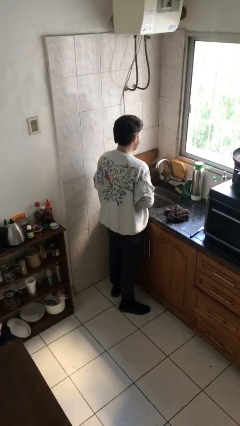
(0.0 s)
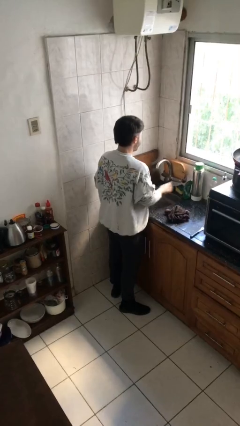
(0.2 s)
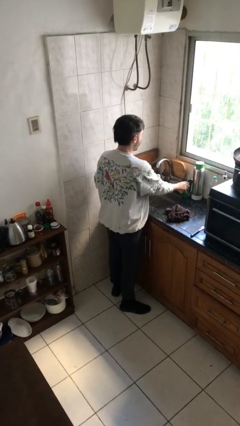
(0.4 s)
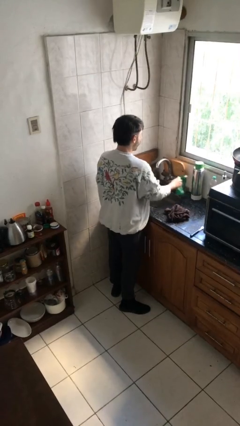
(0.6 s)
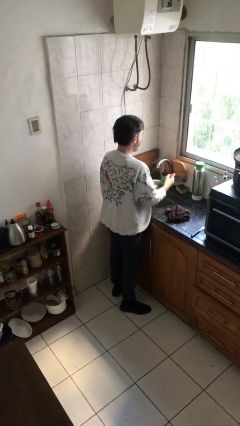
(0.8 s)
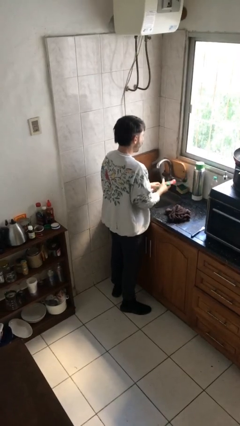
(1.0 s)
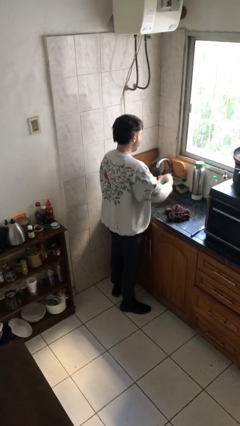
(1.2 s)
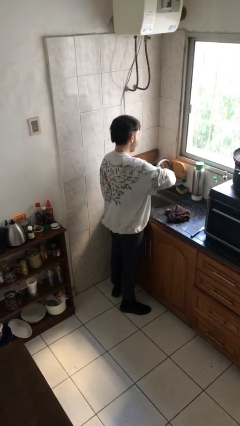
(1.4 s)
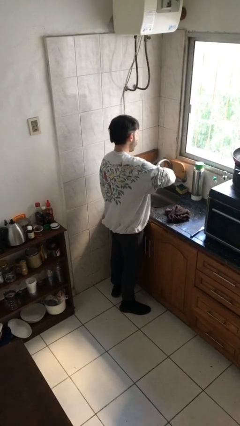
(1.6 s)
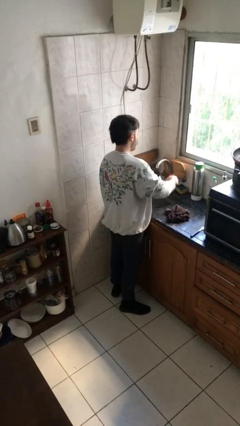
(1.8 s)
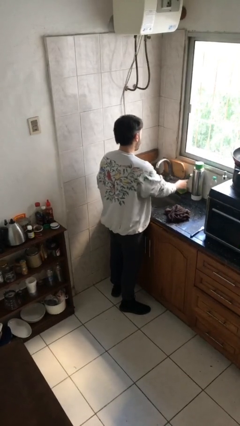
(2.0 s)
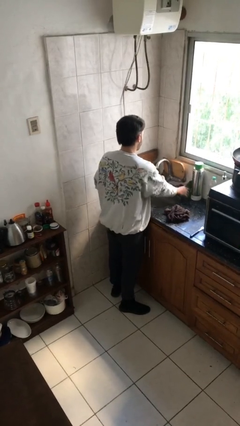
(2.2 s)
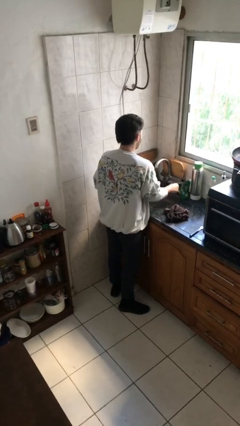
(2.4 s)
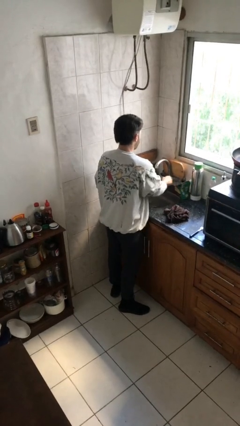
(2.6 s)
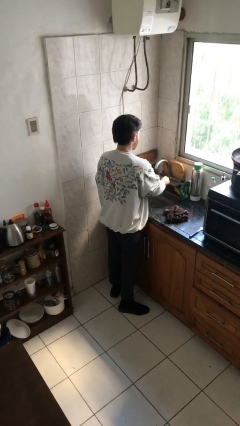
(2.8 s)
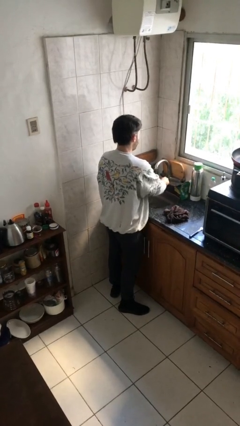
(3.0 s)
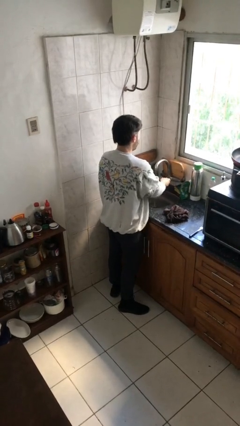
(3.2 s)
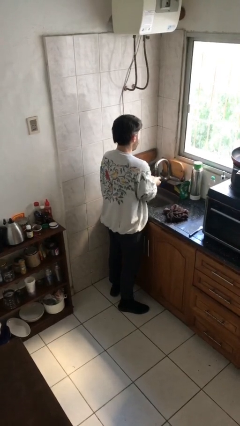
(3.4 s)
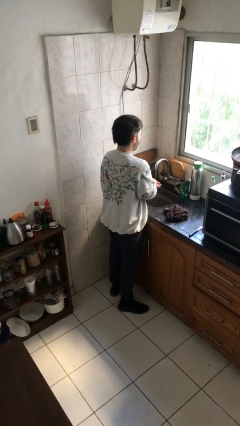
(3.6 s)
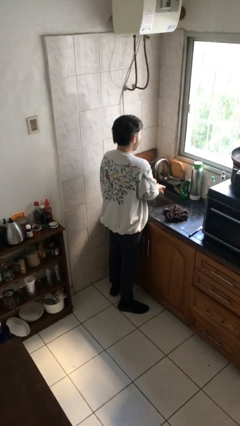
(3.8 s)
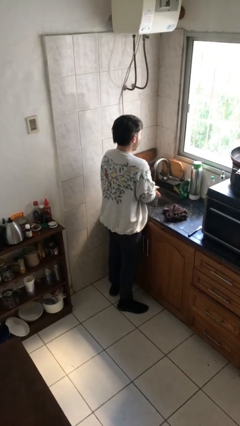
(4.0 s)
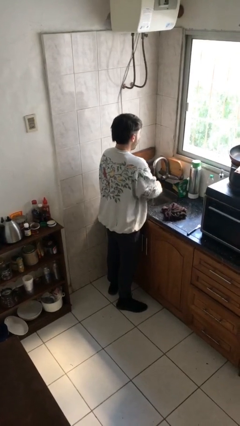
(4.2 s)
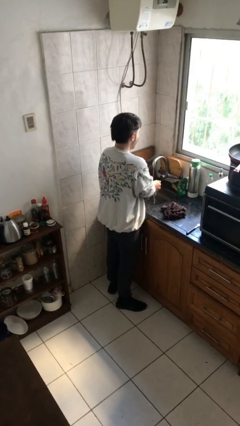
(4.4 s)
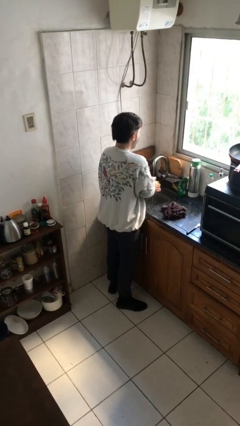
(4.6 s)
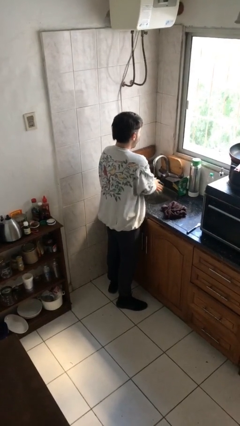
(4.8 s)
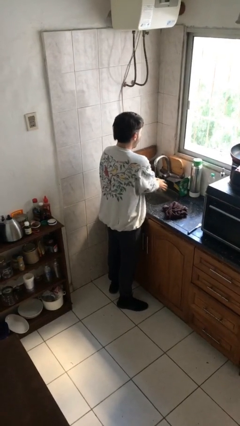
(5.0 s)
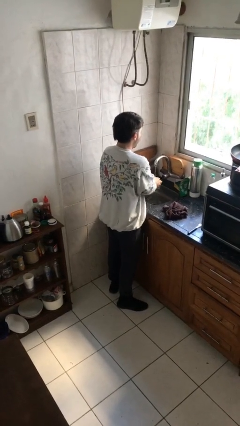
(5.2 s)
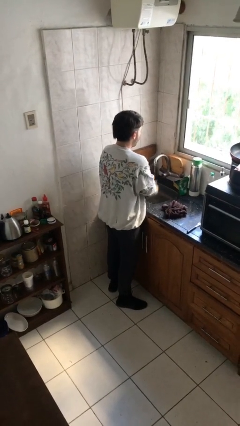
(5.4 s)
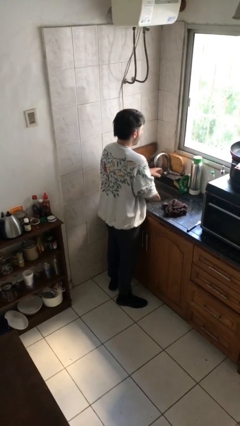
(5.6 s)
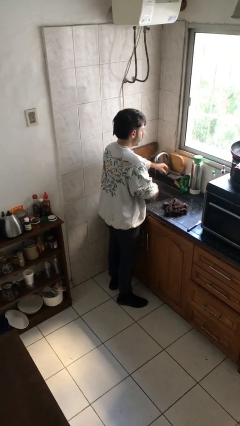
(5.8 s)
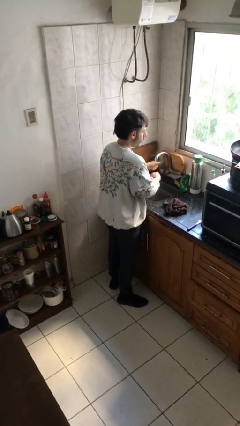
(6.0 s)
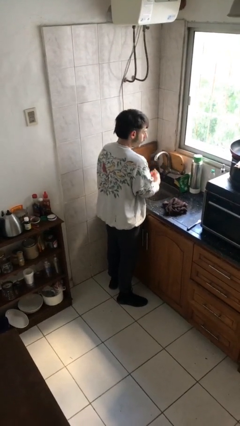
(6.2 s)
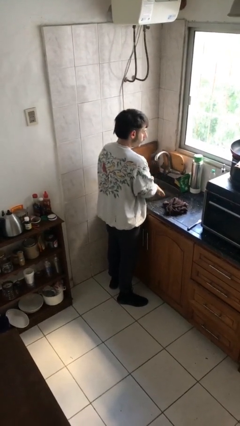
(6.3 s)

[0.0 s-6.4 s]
person washes hands

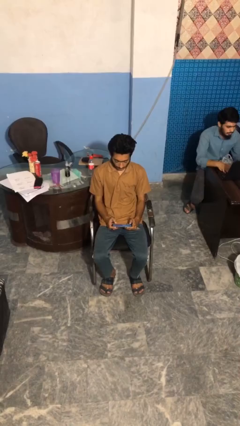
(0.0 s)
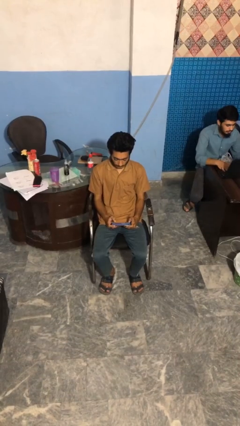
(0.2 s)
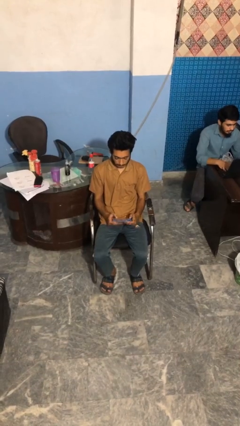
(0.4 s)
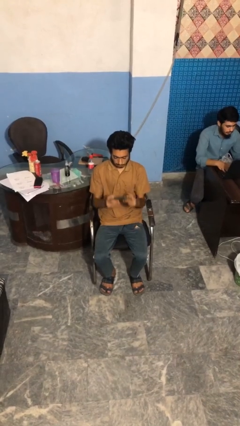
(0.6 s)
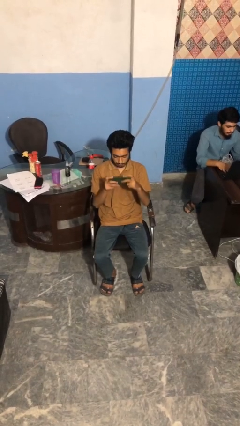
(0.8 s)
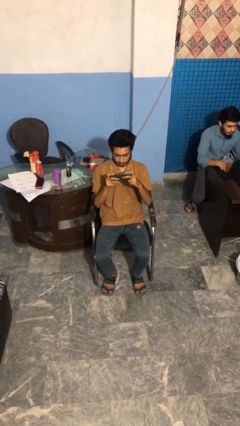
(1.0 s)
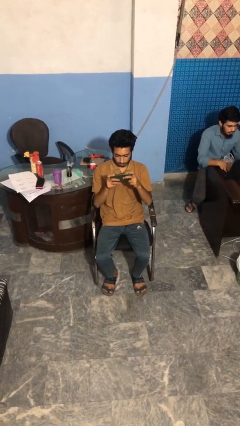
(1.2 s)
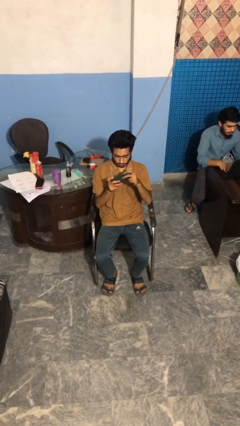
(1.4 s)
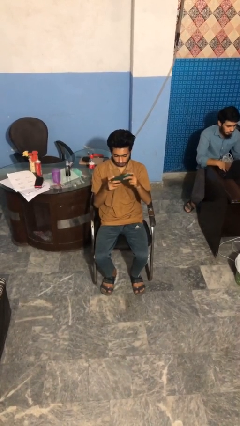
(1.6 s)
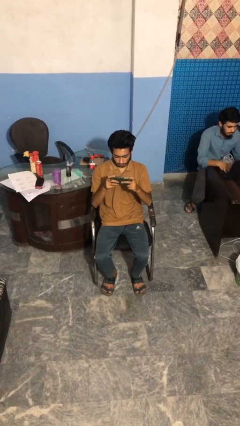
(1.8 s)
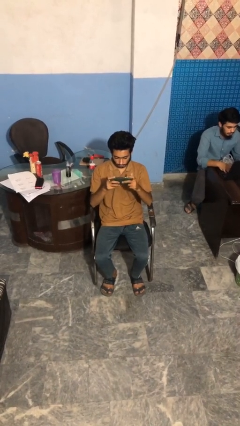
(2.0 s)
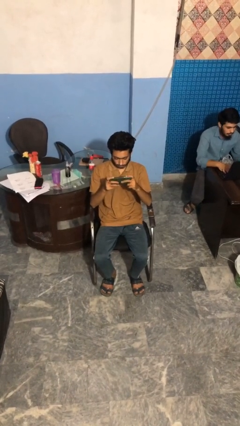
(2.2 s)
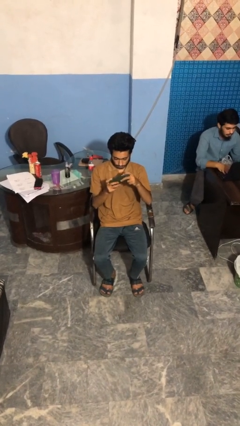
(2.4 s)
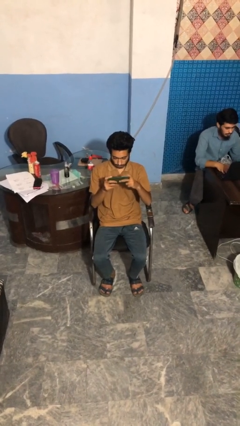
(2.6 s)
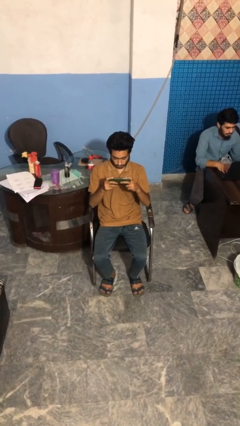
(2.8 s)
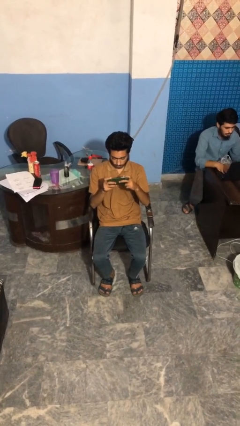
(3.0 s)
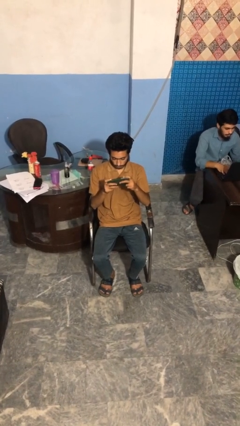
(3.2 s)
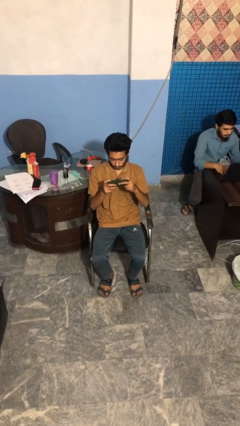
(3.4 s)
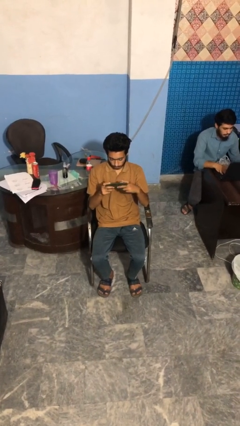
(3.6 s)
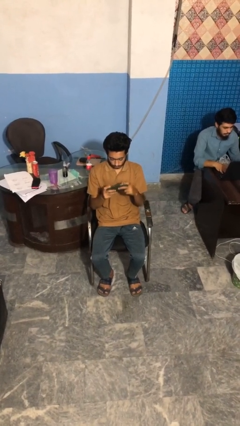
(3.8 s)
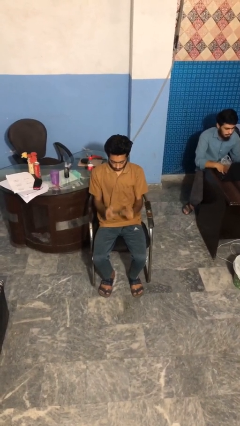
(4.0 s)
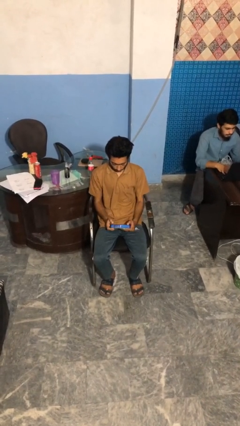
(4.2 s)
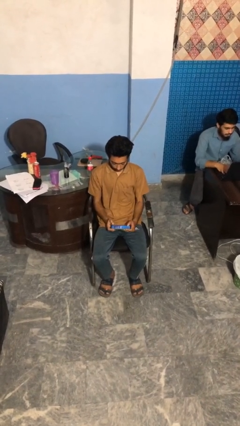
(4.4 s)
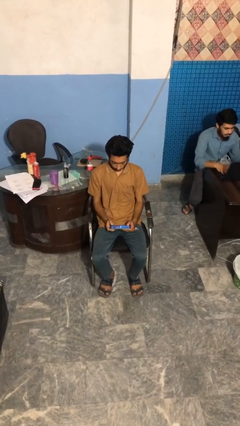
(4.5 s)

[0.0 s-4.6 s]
person interacts with handheld game

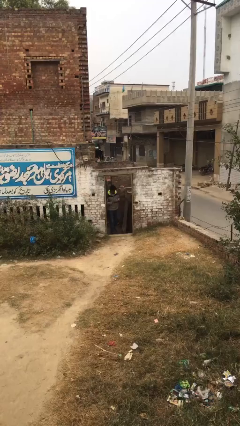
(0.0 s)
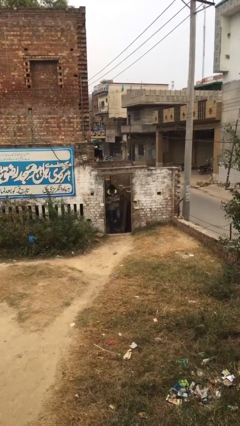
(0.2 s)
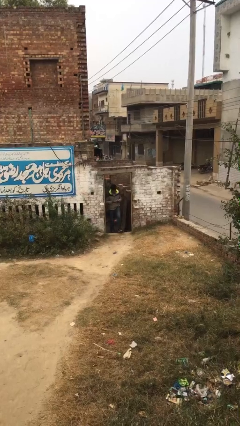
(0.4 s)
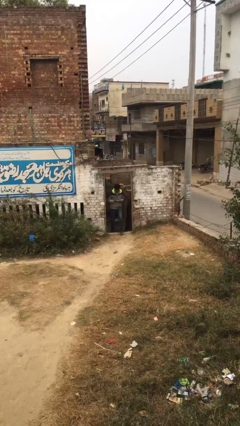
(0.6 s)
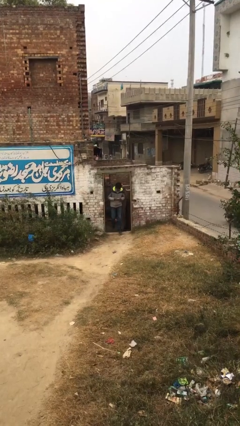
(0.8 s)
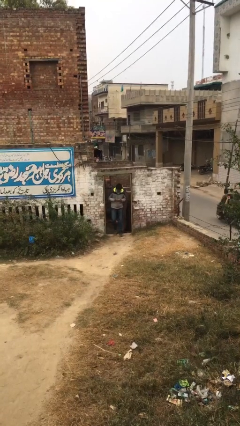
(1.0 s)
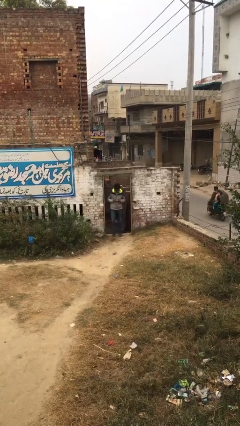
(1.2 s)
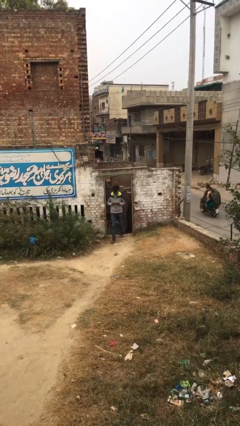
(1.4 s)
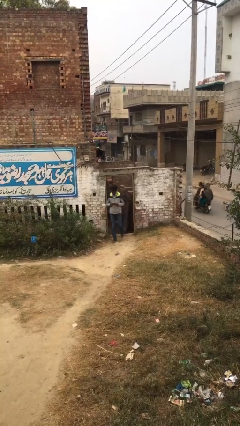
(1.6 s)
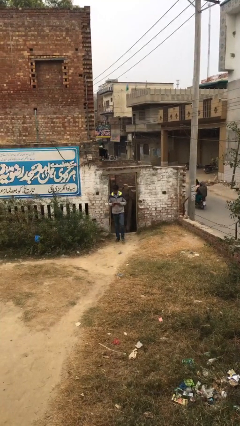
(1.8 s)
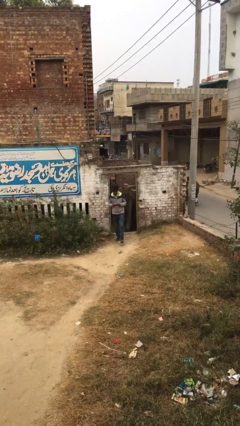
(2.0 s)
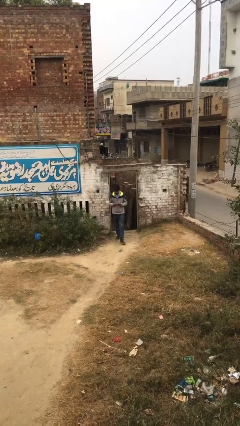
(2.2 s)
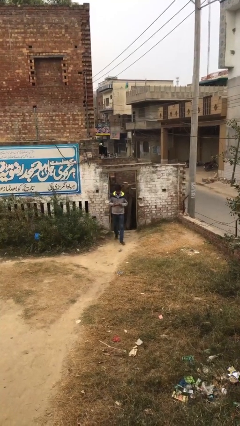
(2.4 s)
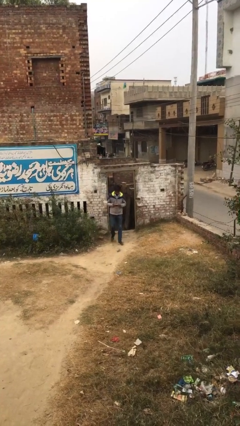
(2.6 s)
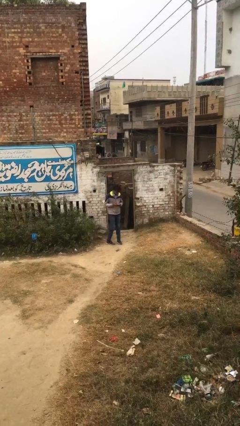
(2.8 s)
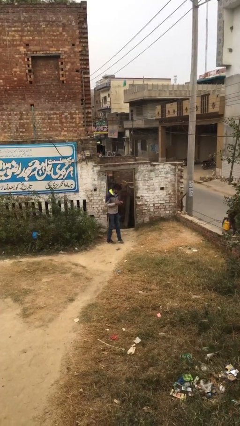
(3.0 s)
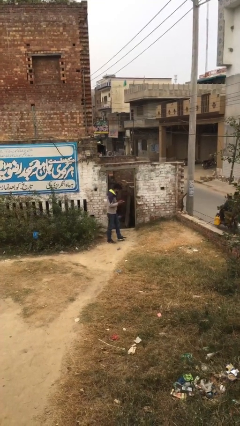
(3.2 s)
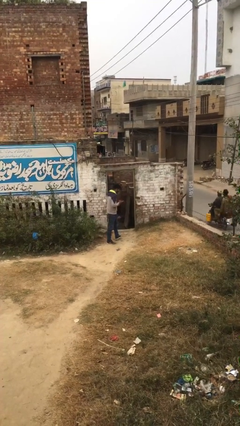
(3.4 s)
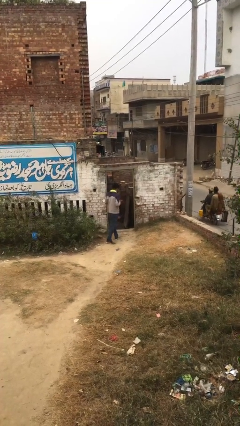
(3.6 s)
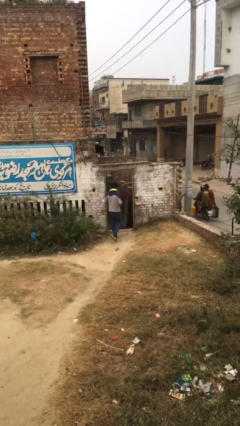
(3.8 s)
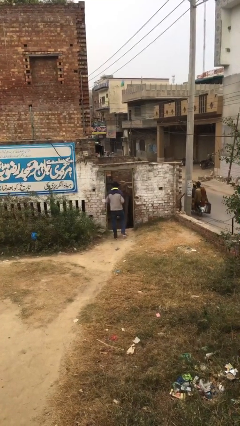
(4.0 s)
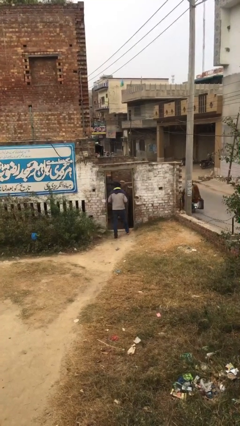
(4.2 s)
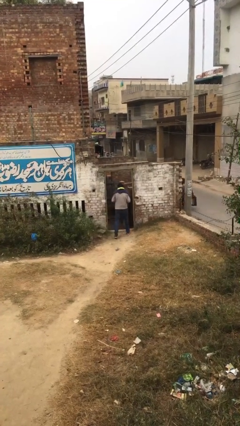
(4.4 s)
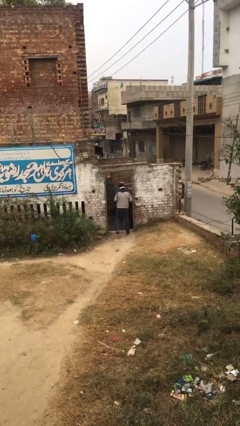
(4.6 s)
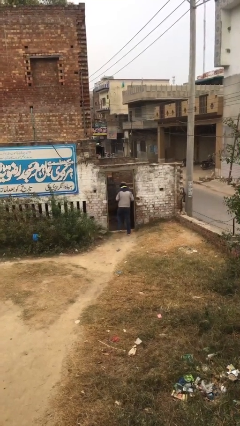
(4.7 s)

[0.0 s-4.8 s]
person exits scene through structure

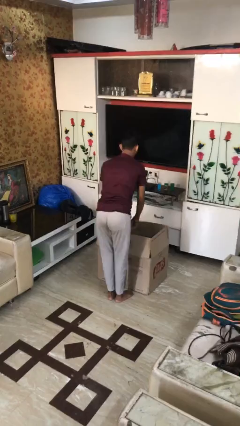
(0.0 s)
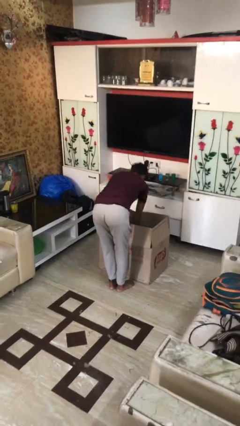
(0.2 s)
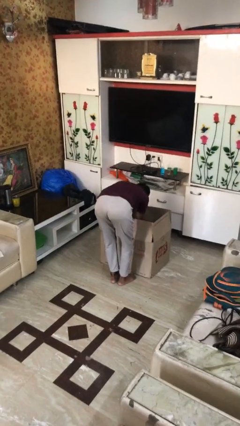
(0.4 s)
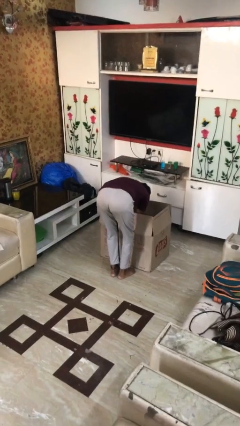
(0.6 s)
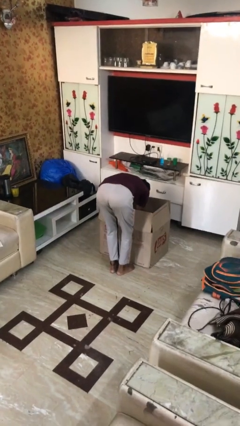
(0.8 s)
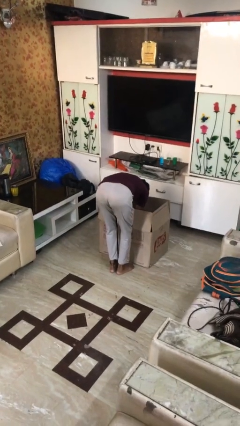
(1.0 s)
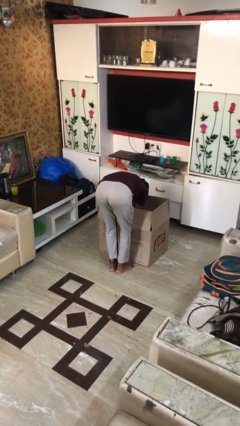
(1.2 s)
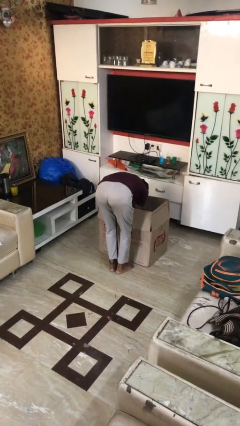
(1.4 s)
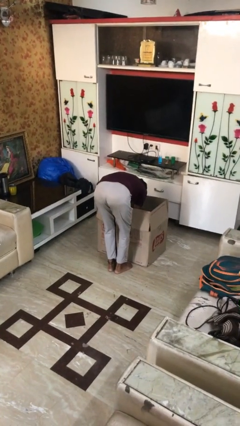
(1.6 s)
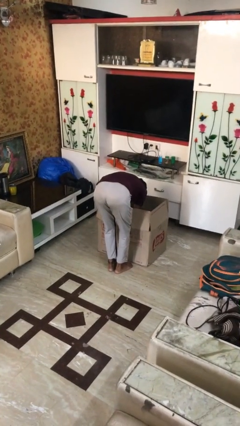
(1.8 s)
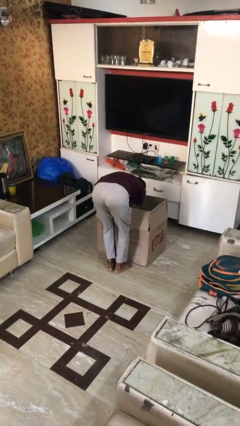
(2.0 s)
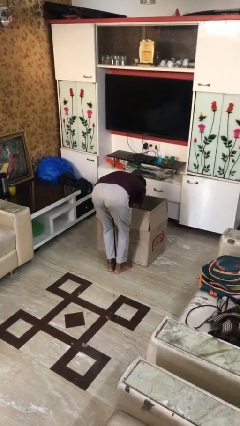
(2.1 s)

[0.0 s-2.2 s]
person searches in box
